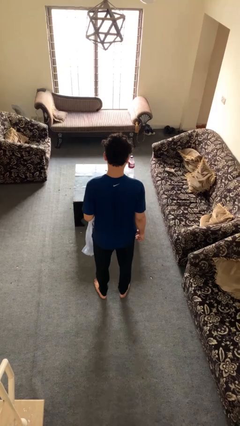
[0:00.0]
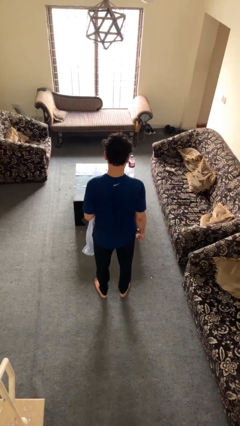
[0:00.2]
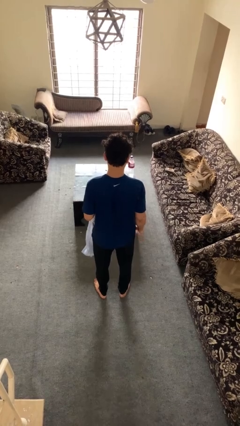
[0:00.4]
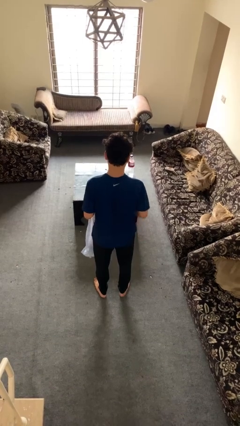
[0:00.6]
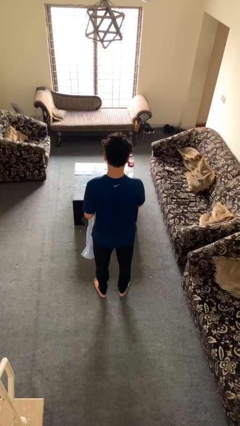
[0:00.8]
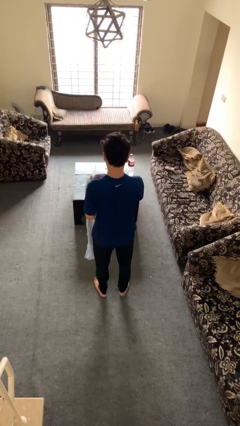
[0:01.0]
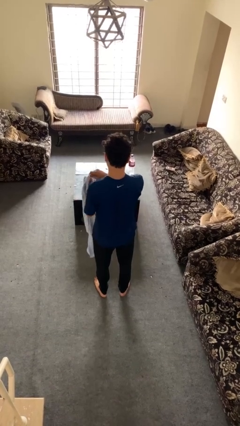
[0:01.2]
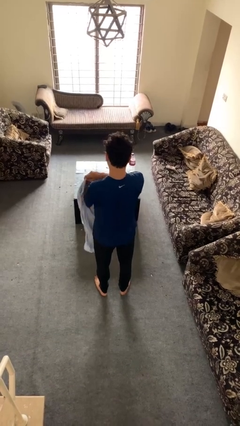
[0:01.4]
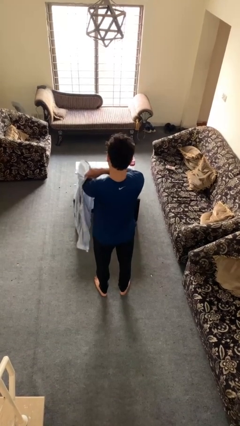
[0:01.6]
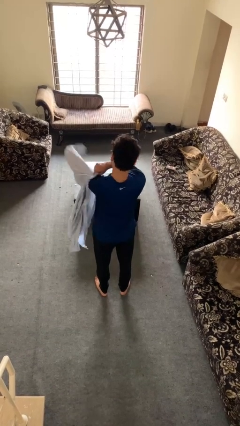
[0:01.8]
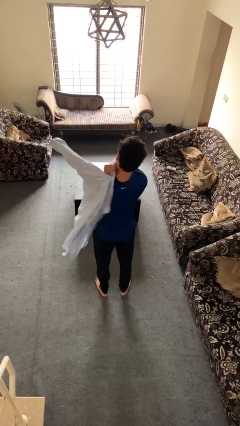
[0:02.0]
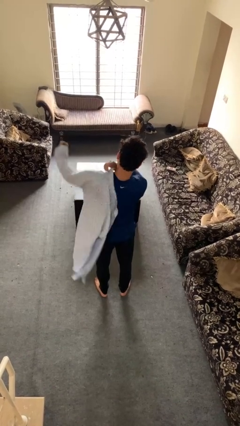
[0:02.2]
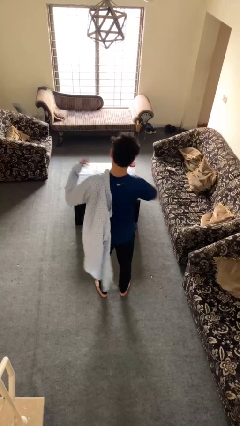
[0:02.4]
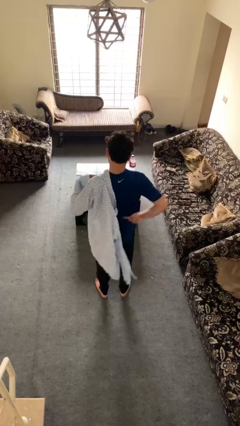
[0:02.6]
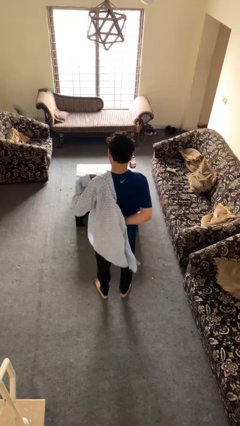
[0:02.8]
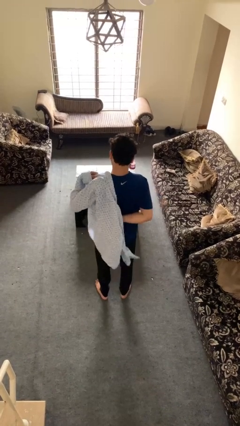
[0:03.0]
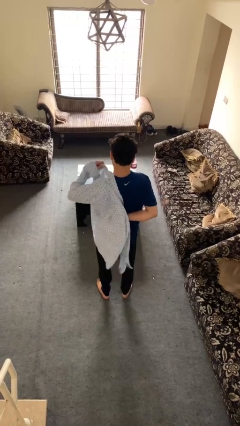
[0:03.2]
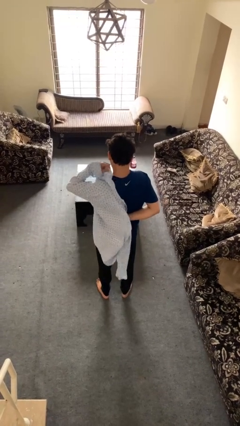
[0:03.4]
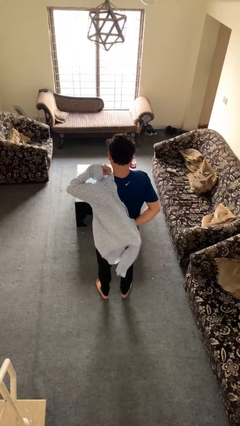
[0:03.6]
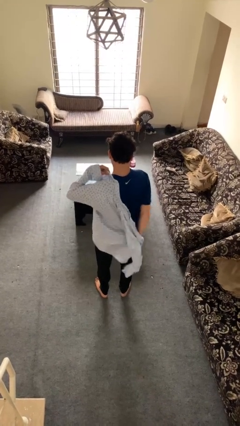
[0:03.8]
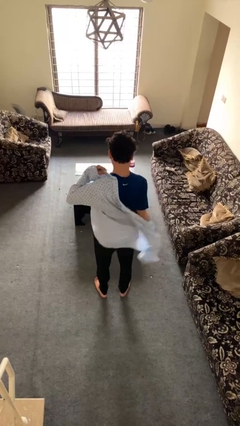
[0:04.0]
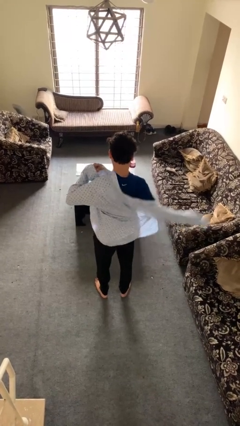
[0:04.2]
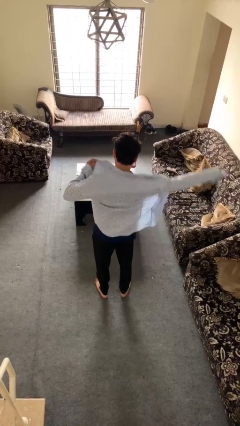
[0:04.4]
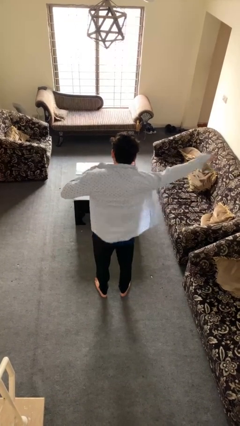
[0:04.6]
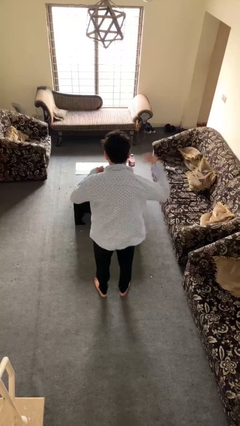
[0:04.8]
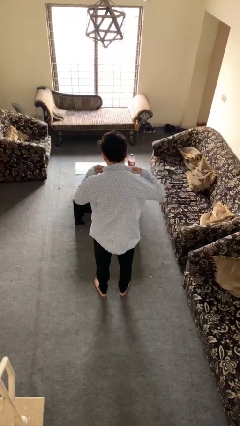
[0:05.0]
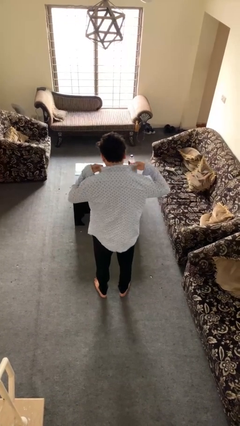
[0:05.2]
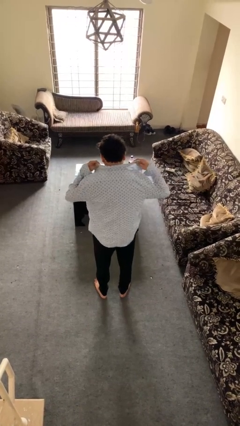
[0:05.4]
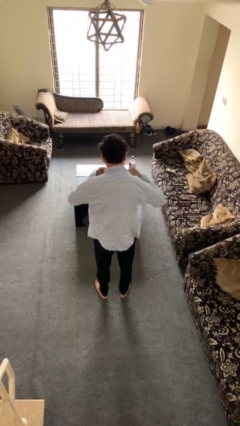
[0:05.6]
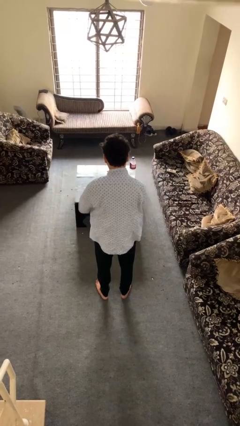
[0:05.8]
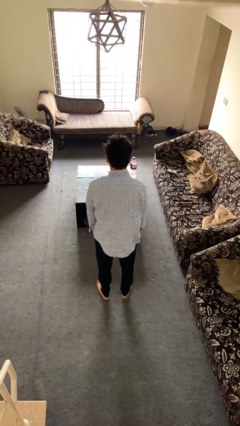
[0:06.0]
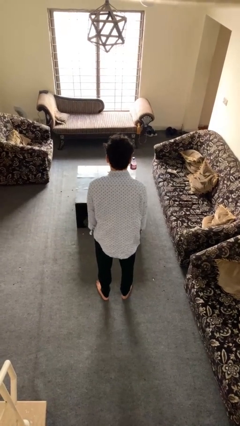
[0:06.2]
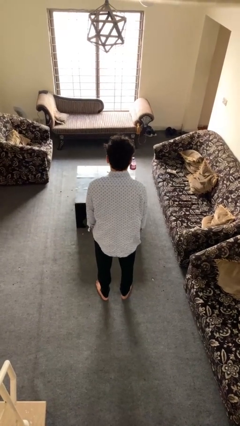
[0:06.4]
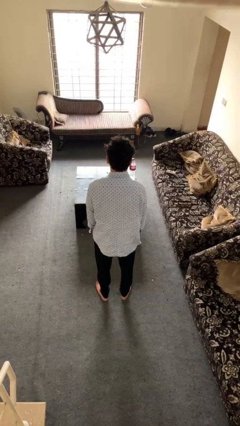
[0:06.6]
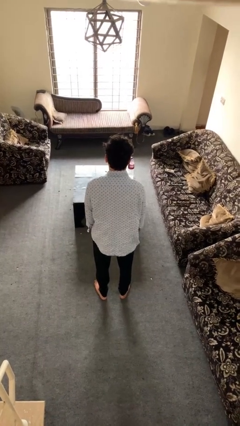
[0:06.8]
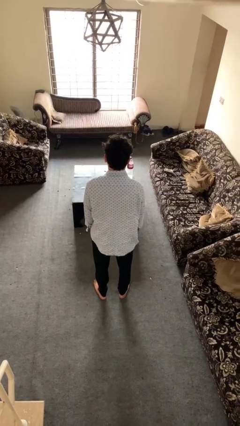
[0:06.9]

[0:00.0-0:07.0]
person puts on shirt

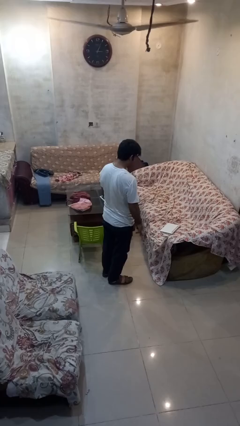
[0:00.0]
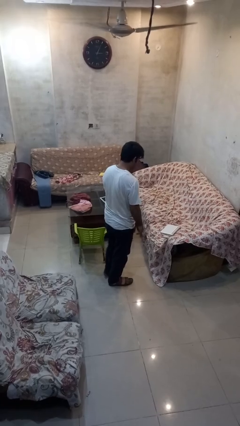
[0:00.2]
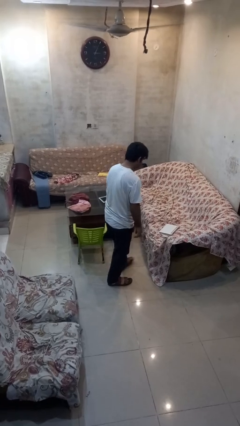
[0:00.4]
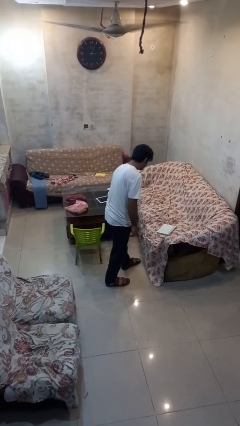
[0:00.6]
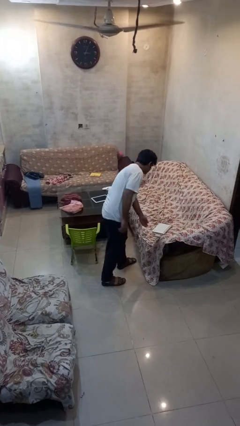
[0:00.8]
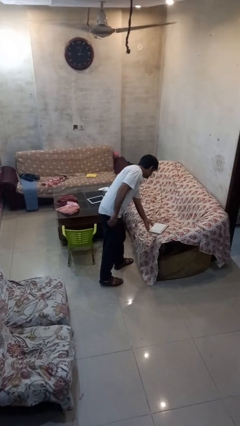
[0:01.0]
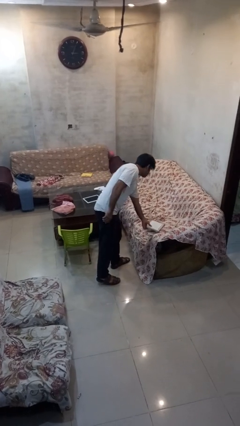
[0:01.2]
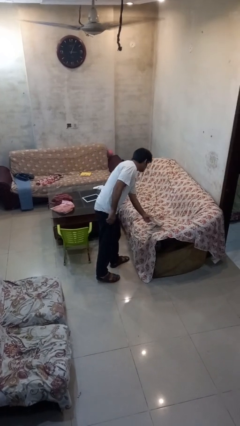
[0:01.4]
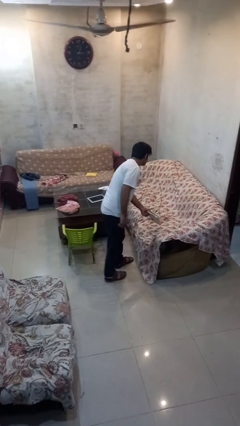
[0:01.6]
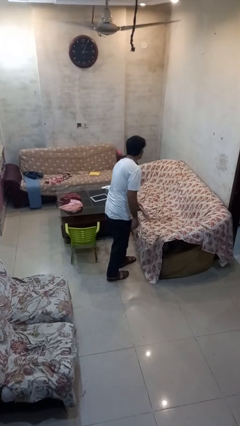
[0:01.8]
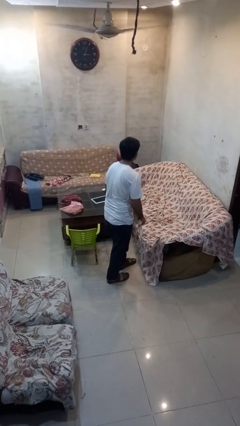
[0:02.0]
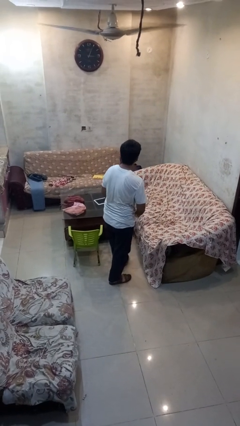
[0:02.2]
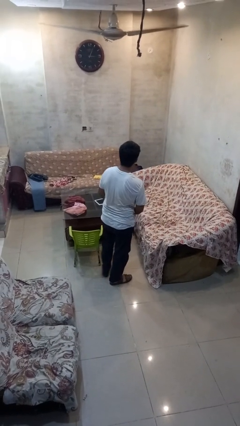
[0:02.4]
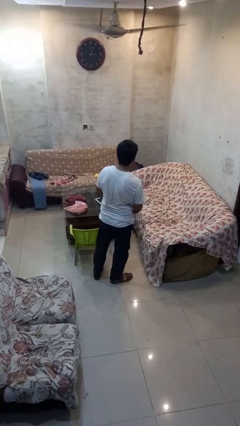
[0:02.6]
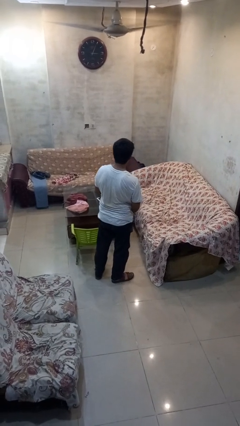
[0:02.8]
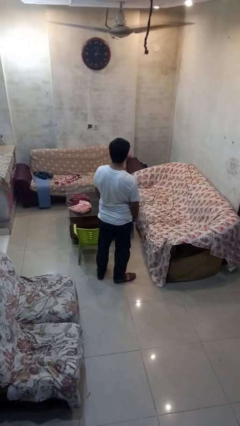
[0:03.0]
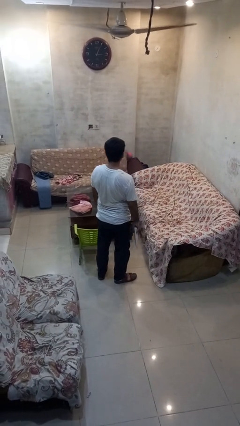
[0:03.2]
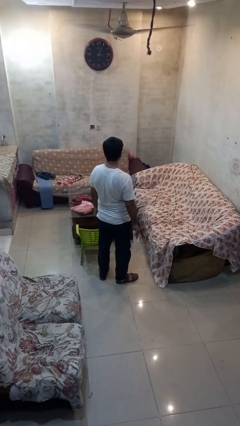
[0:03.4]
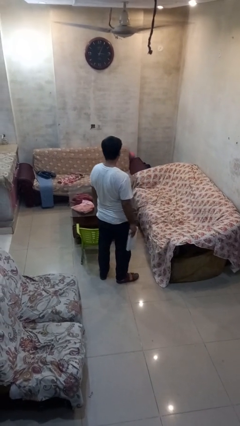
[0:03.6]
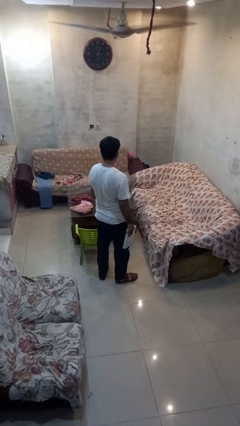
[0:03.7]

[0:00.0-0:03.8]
person picks up object from couch

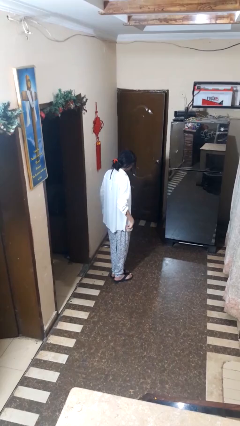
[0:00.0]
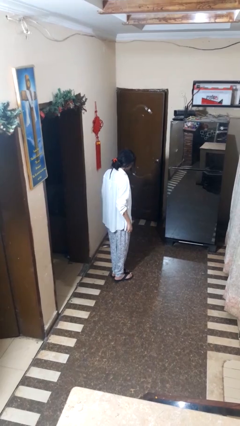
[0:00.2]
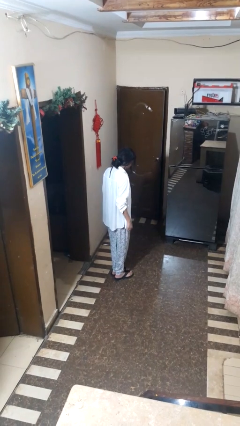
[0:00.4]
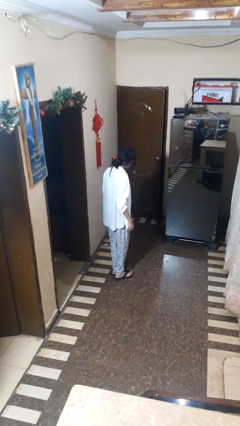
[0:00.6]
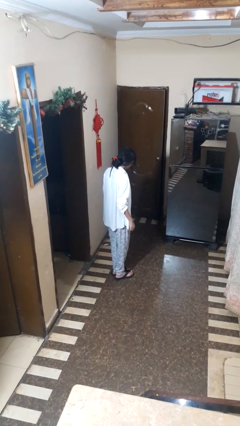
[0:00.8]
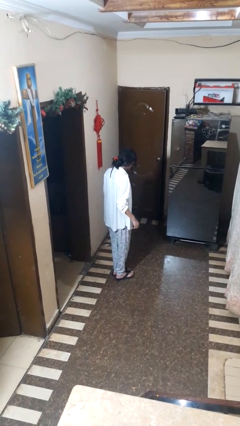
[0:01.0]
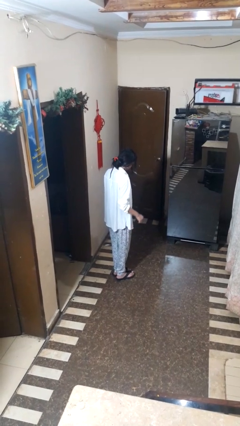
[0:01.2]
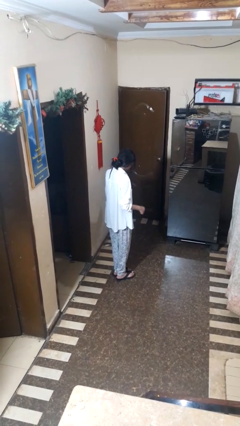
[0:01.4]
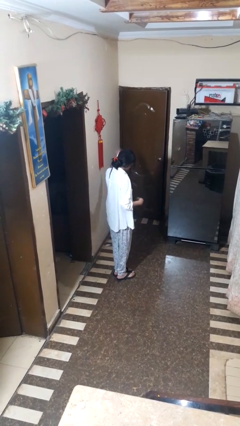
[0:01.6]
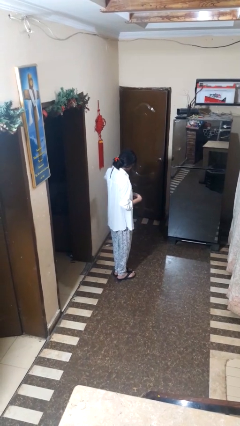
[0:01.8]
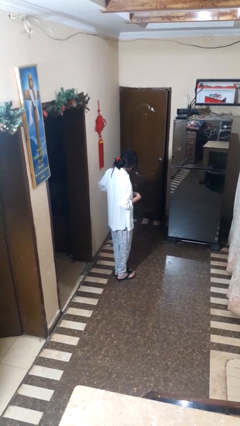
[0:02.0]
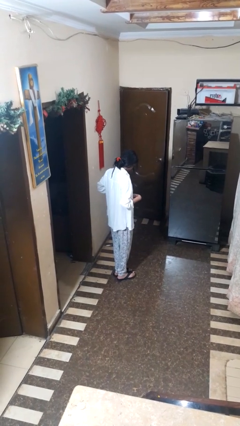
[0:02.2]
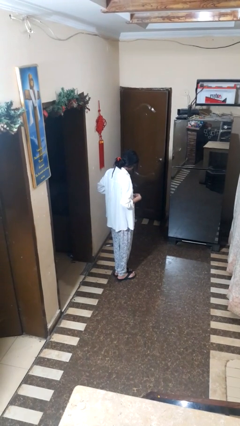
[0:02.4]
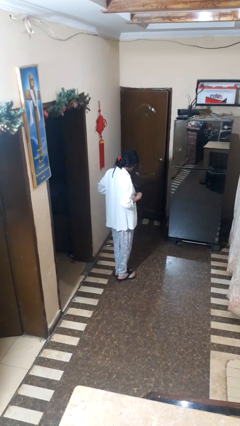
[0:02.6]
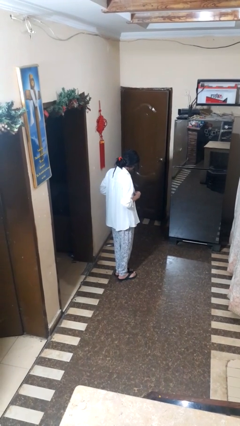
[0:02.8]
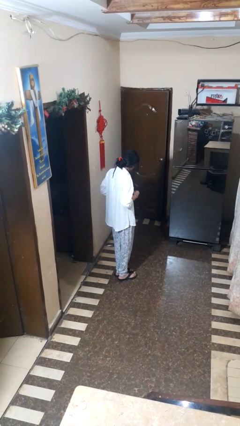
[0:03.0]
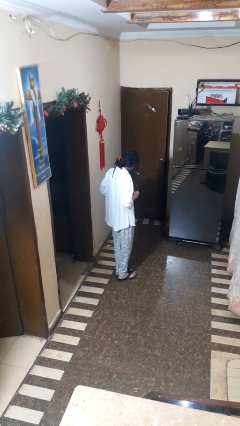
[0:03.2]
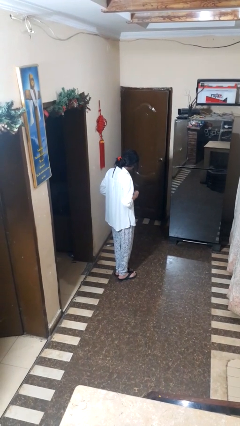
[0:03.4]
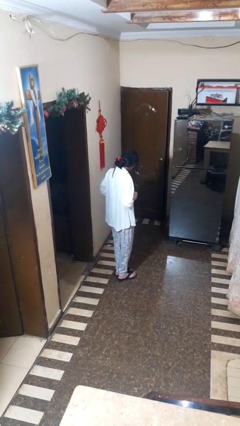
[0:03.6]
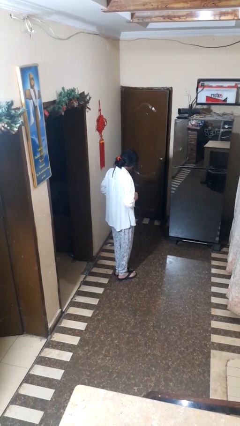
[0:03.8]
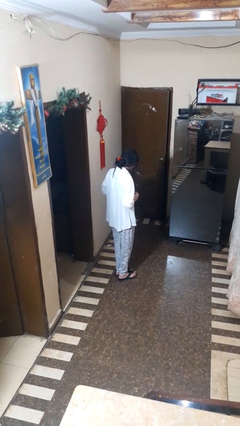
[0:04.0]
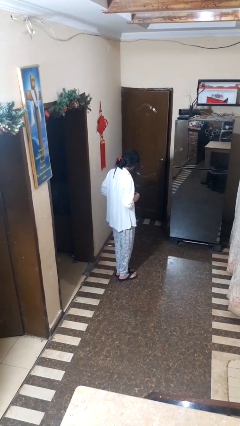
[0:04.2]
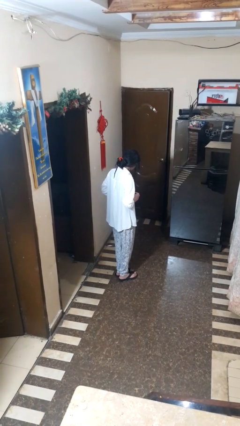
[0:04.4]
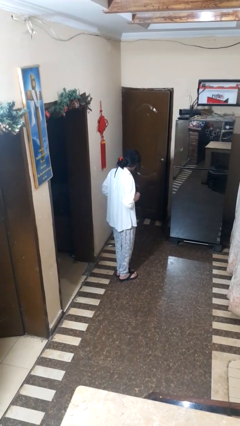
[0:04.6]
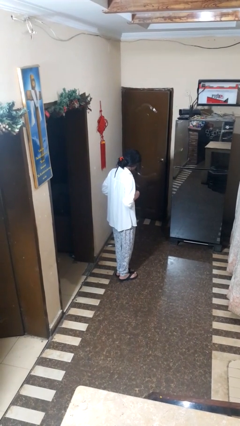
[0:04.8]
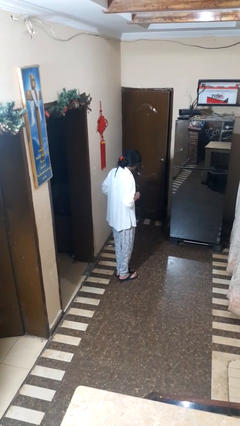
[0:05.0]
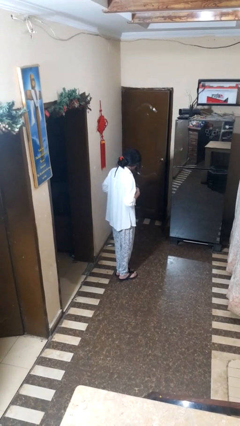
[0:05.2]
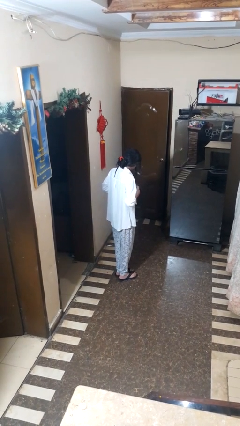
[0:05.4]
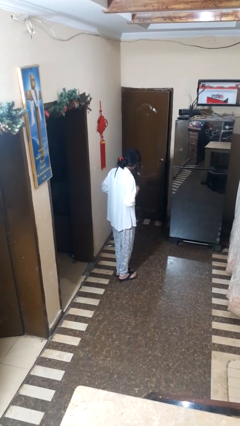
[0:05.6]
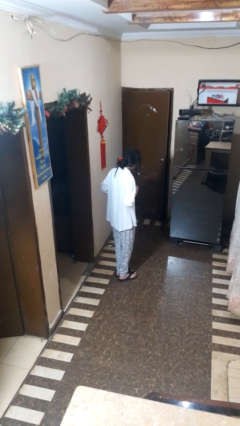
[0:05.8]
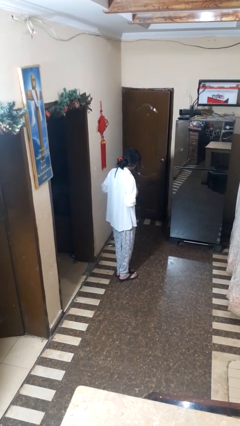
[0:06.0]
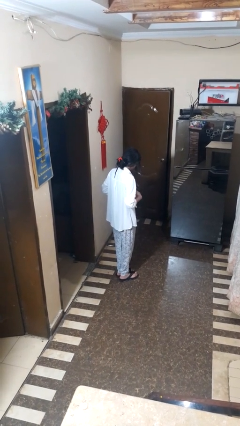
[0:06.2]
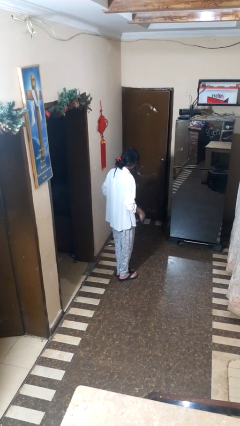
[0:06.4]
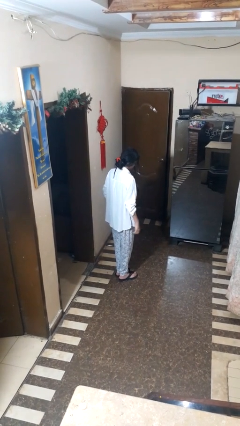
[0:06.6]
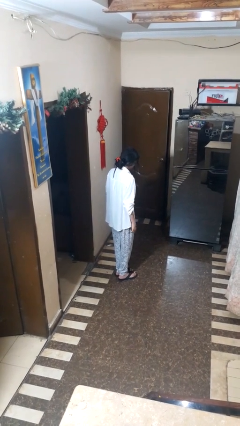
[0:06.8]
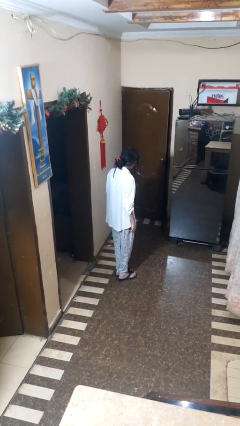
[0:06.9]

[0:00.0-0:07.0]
person buttons shirt
